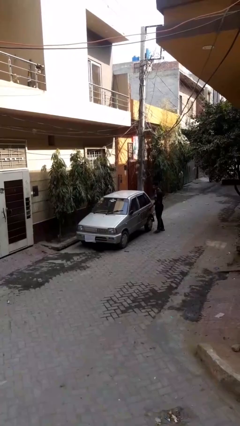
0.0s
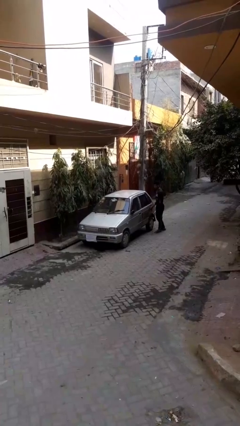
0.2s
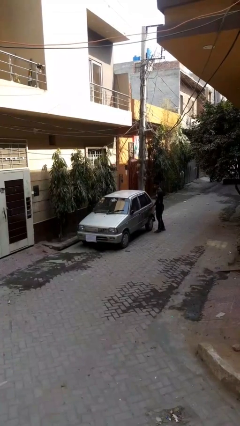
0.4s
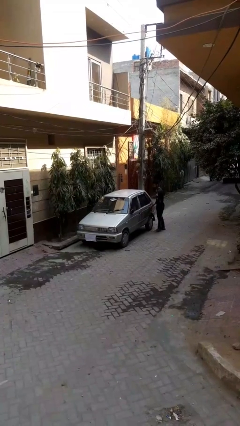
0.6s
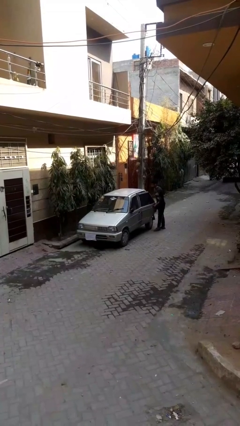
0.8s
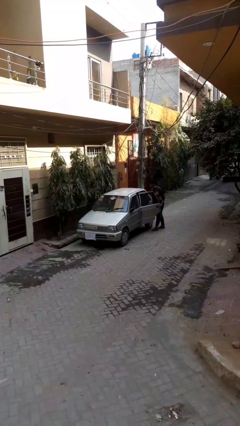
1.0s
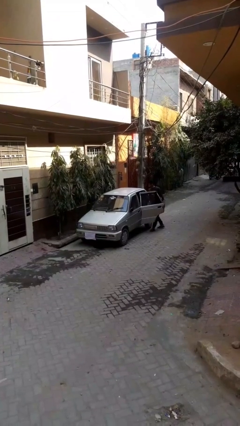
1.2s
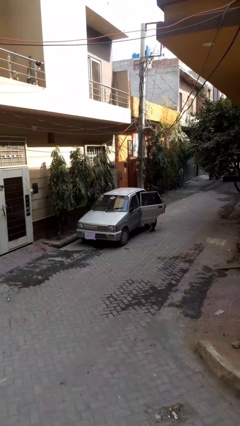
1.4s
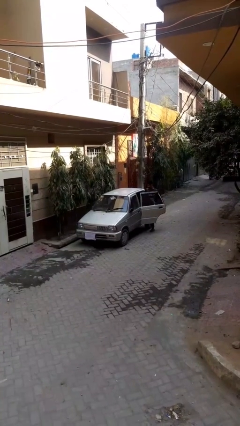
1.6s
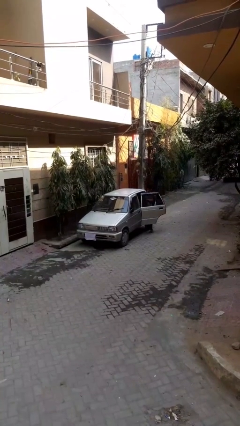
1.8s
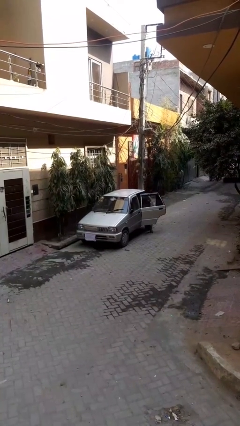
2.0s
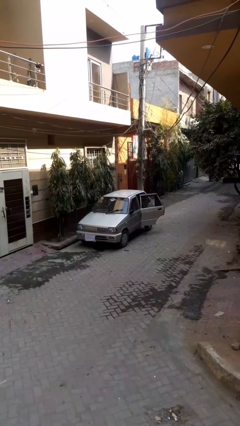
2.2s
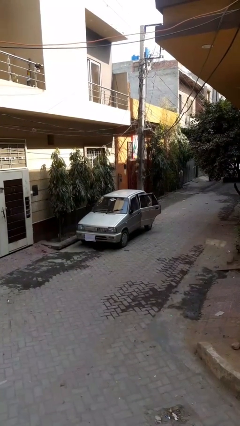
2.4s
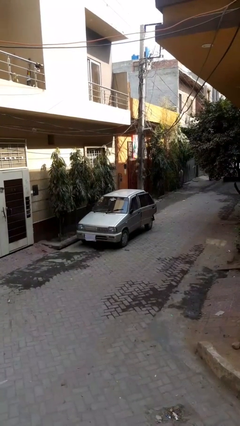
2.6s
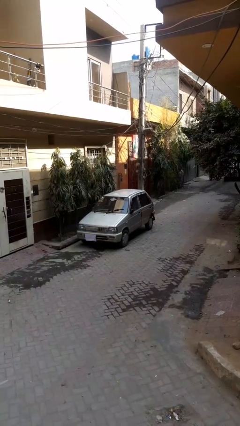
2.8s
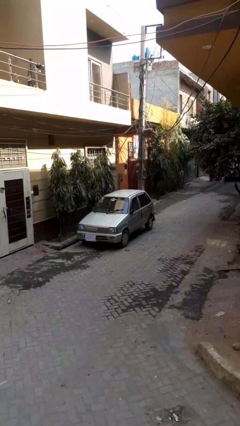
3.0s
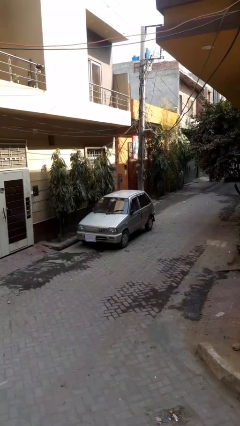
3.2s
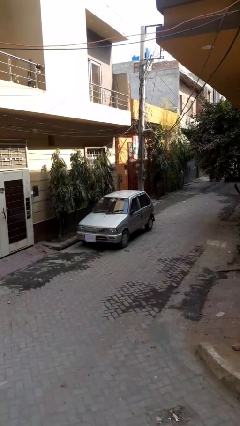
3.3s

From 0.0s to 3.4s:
car picks up person

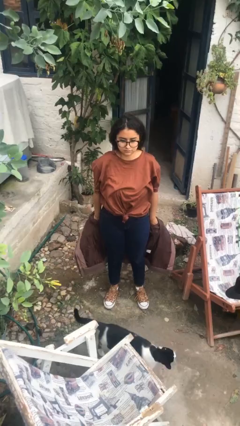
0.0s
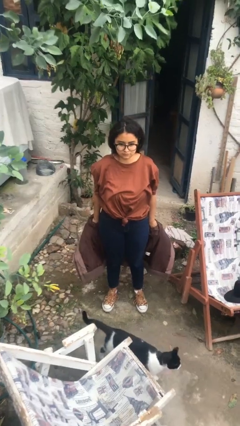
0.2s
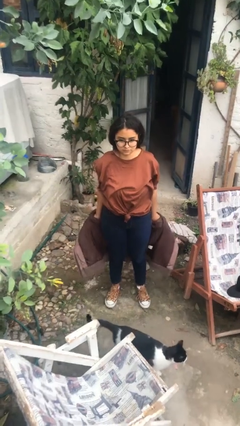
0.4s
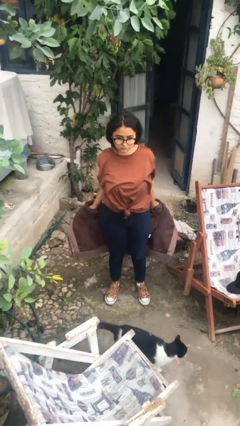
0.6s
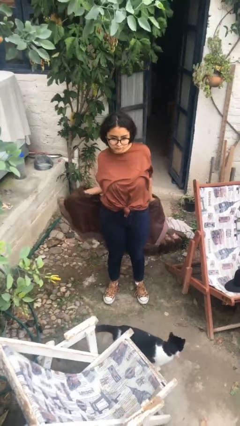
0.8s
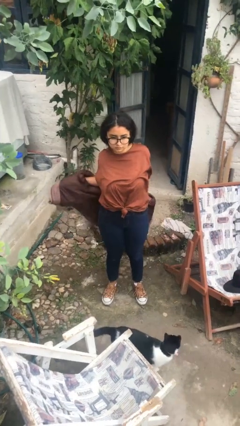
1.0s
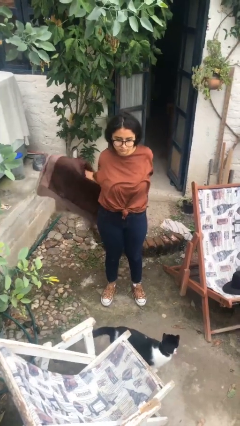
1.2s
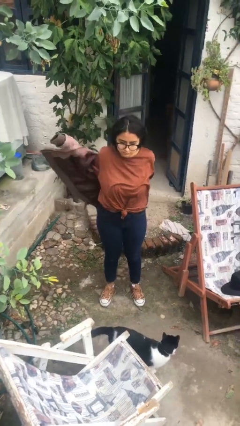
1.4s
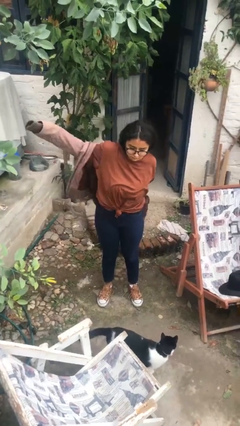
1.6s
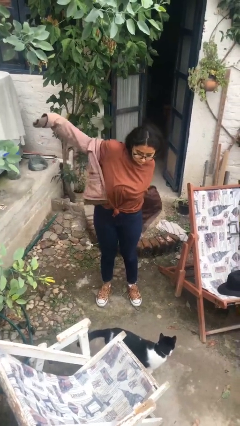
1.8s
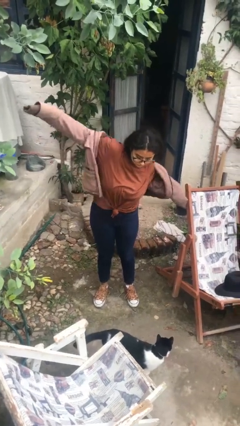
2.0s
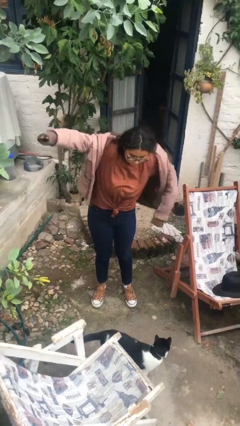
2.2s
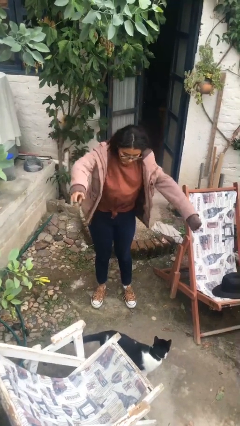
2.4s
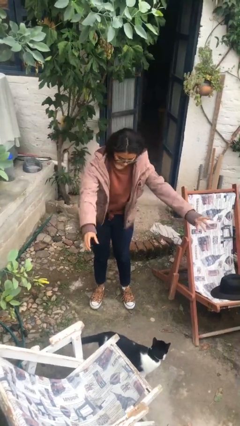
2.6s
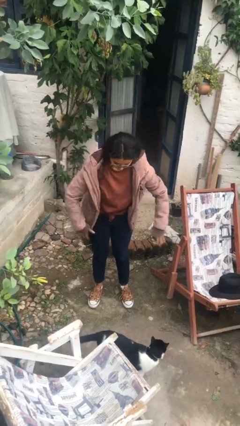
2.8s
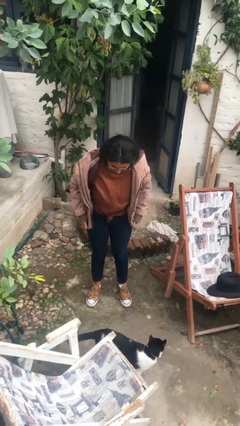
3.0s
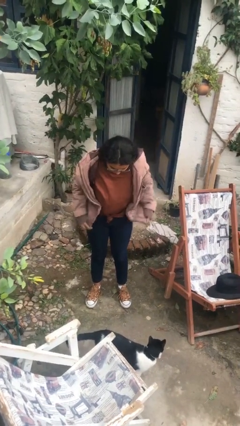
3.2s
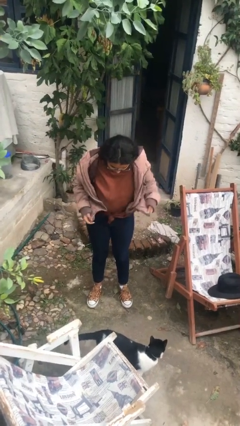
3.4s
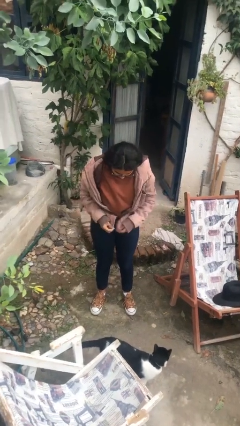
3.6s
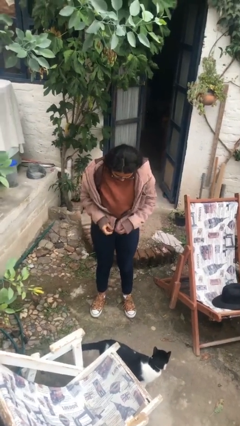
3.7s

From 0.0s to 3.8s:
person puts on jacket

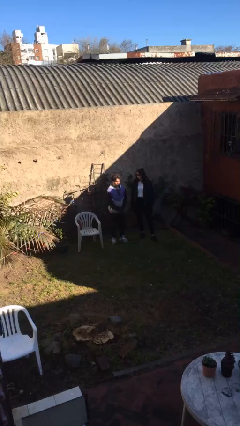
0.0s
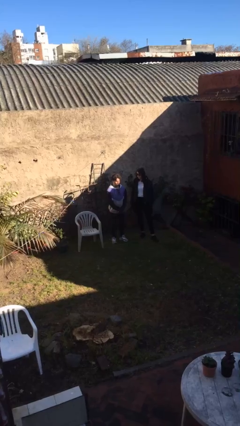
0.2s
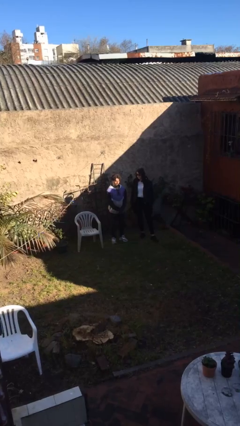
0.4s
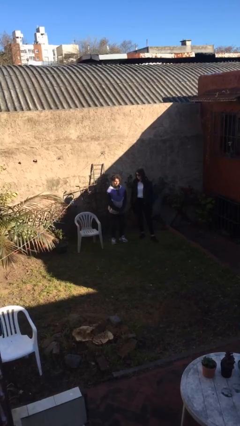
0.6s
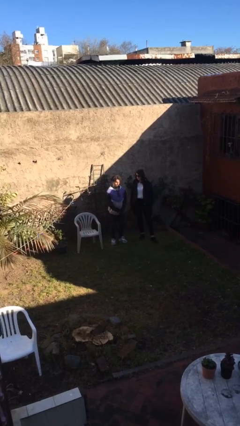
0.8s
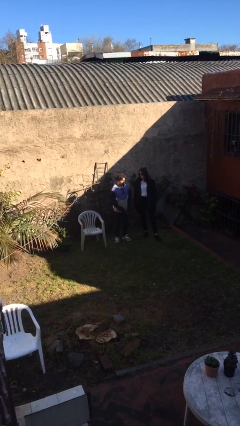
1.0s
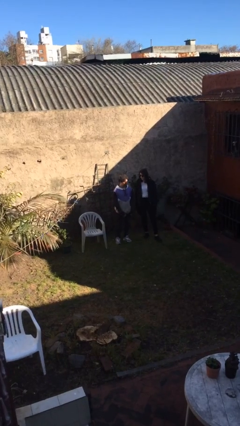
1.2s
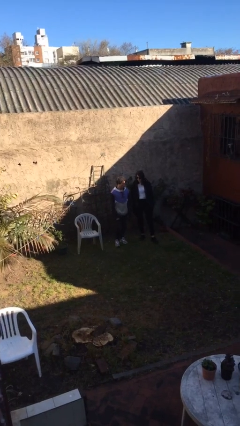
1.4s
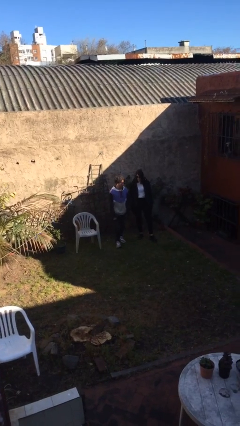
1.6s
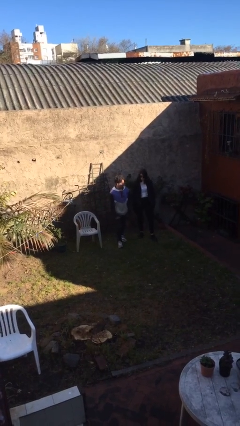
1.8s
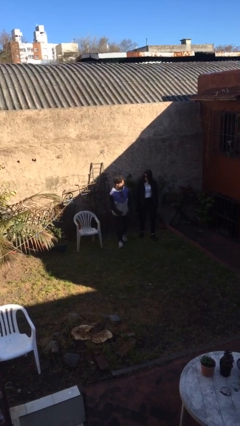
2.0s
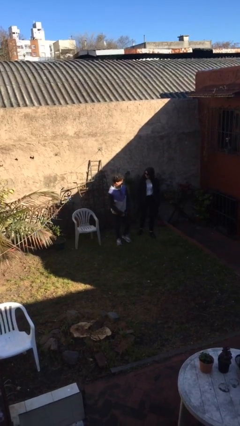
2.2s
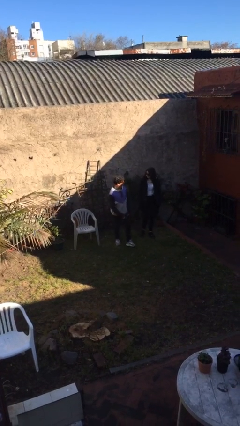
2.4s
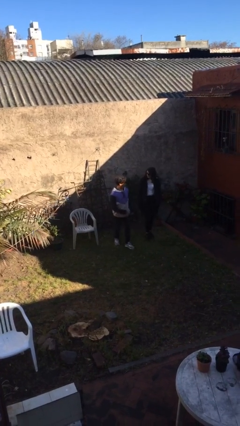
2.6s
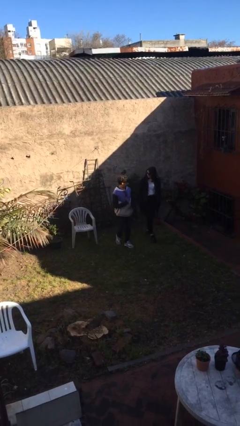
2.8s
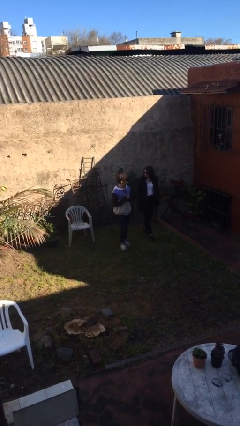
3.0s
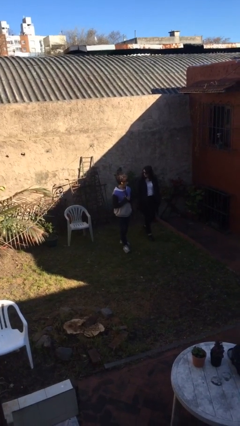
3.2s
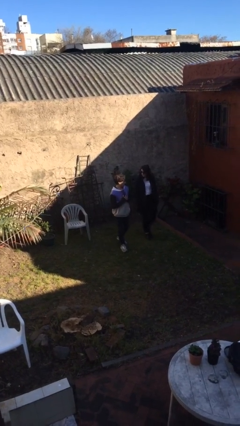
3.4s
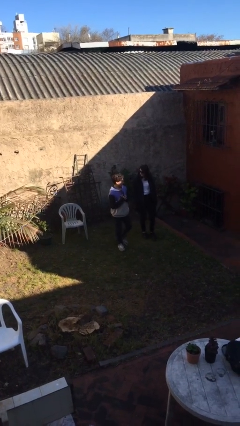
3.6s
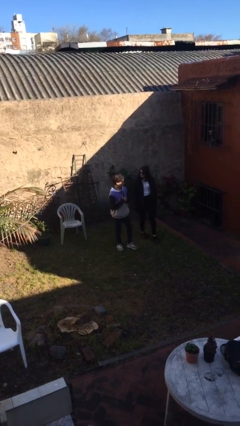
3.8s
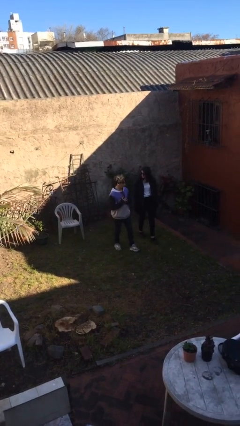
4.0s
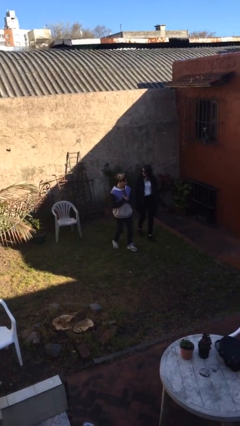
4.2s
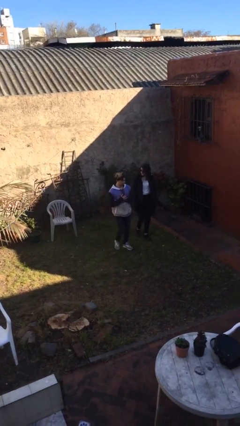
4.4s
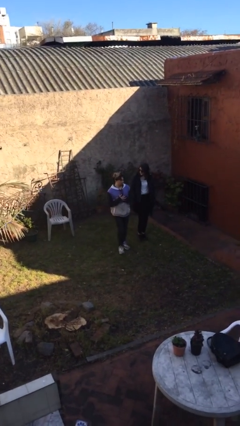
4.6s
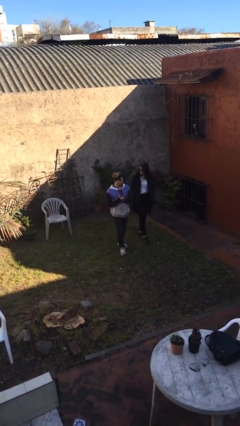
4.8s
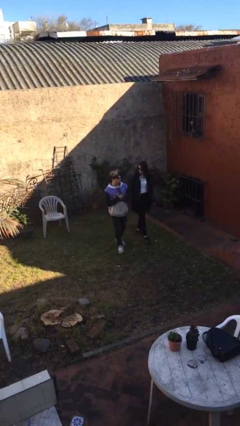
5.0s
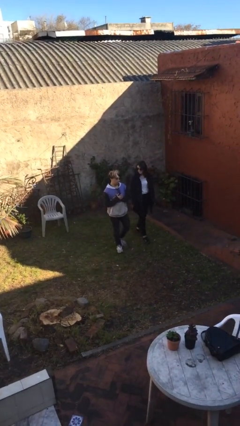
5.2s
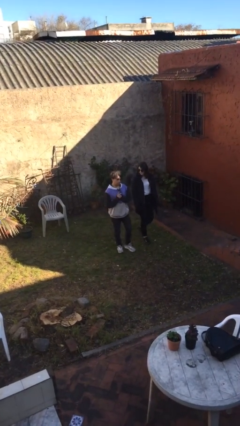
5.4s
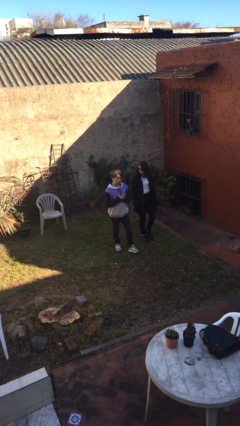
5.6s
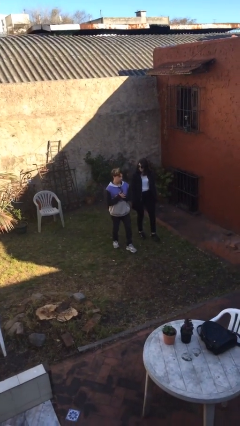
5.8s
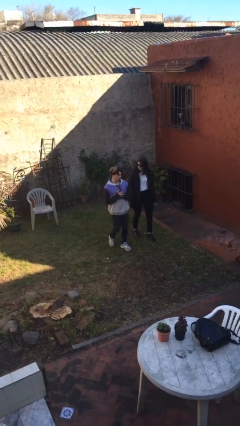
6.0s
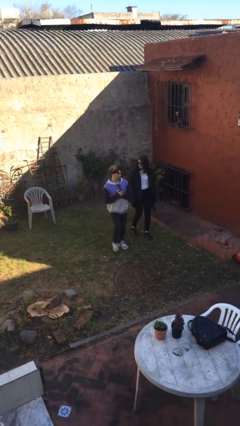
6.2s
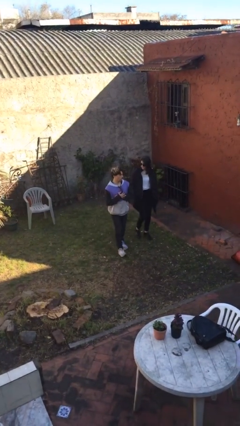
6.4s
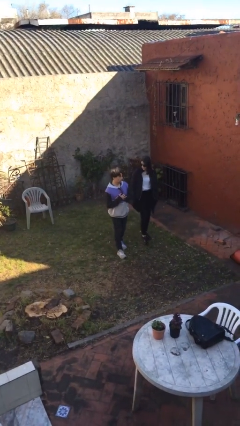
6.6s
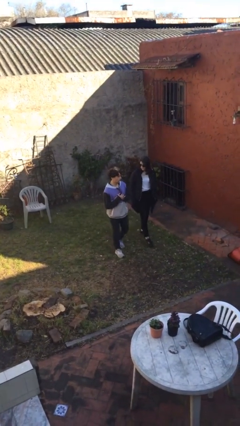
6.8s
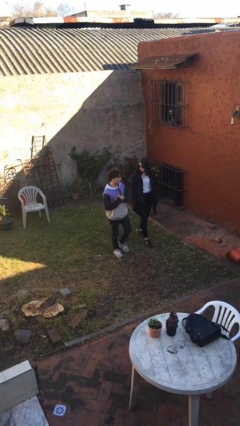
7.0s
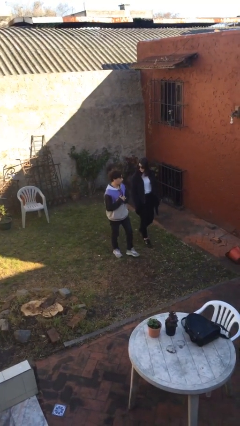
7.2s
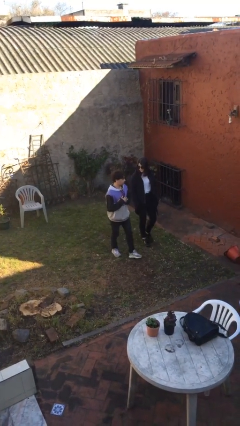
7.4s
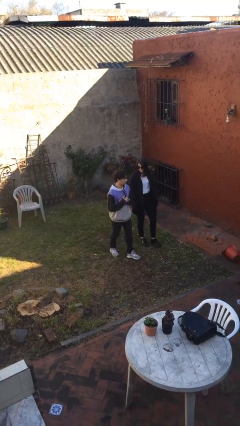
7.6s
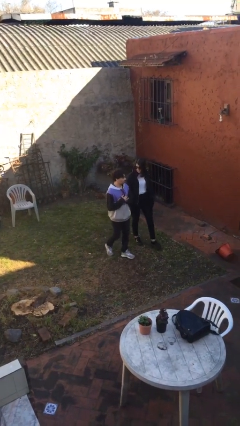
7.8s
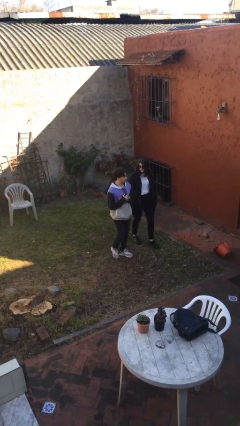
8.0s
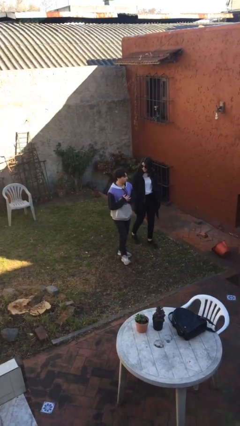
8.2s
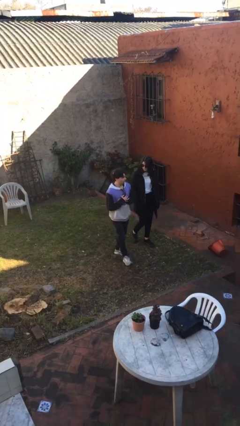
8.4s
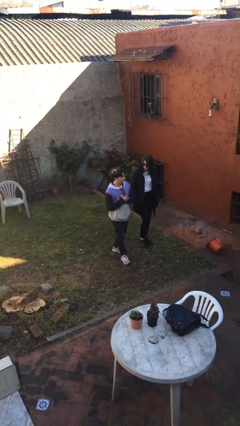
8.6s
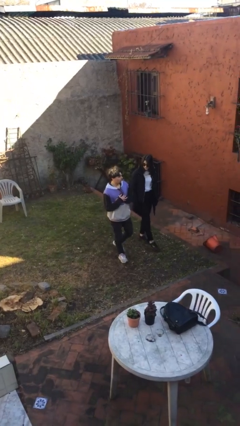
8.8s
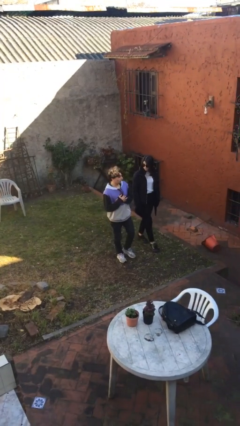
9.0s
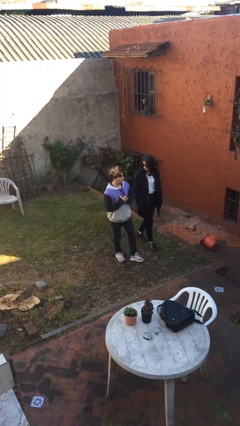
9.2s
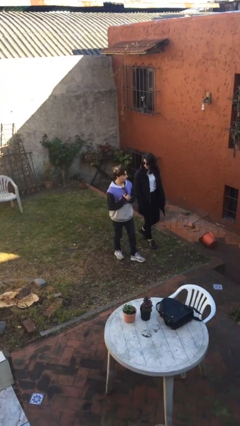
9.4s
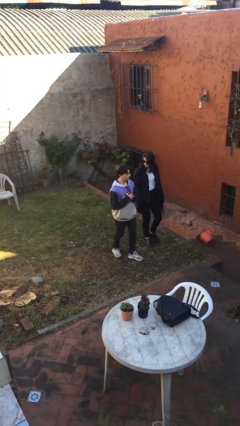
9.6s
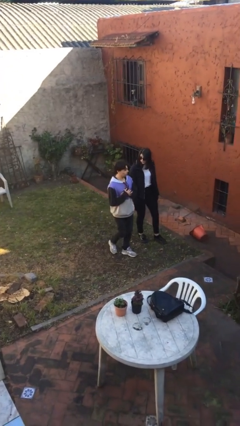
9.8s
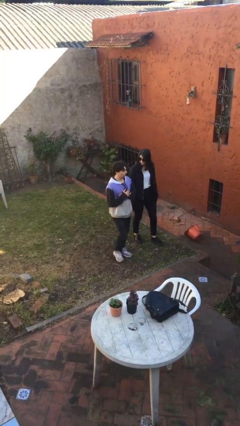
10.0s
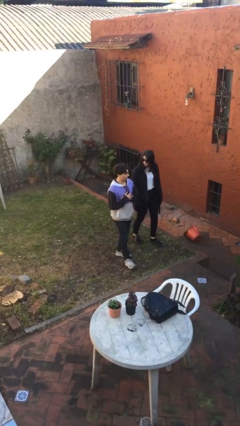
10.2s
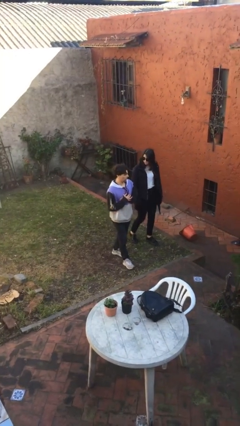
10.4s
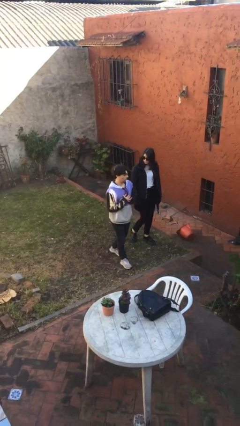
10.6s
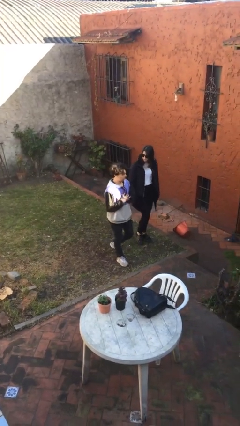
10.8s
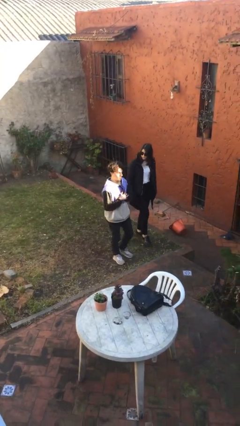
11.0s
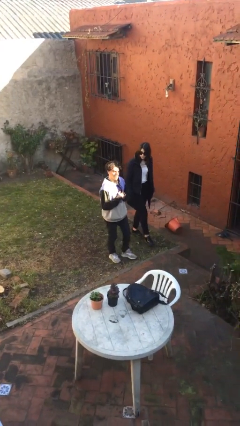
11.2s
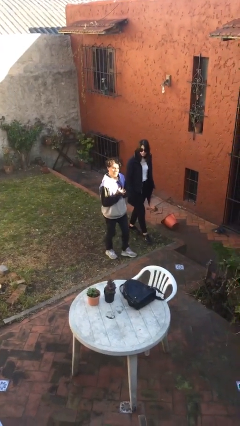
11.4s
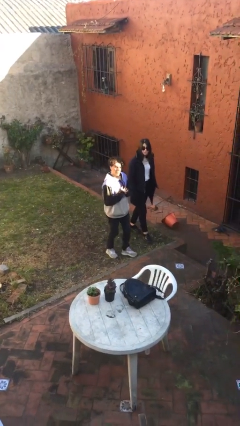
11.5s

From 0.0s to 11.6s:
person talks to person
